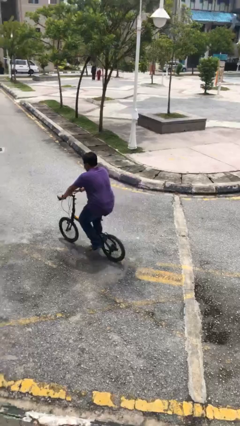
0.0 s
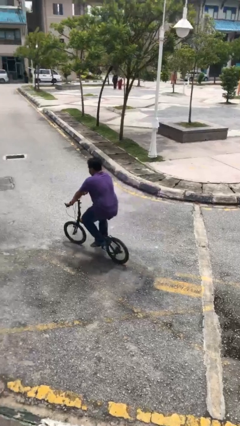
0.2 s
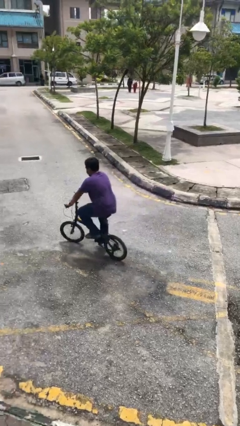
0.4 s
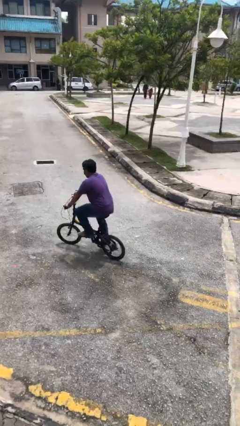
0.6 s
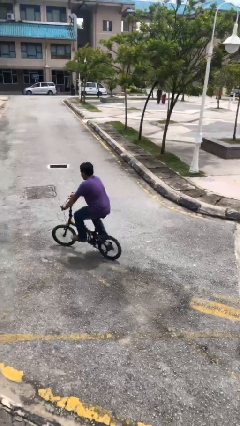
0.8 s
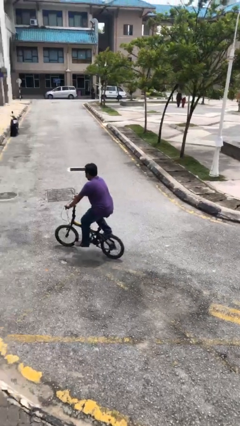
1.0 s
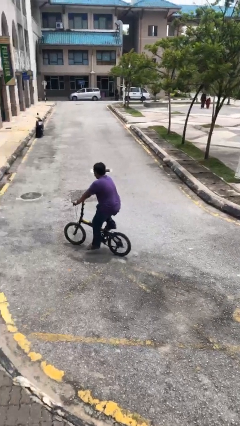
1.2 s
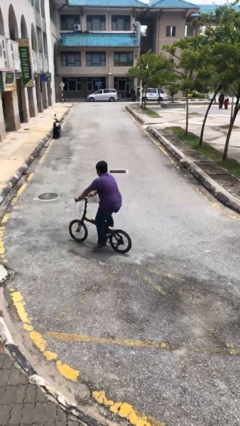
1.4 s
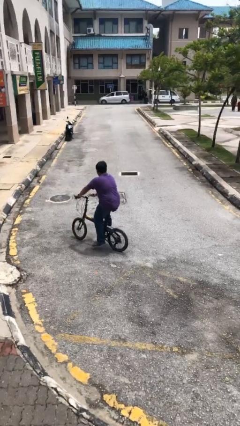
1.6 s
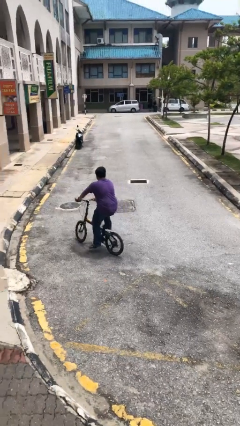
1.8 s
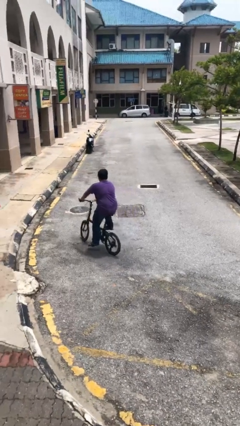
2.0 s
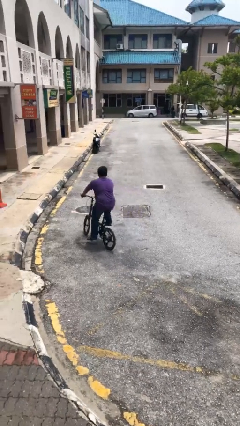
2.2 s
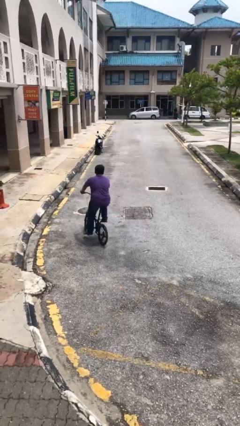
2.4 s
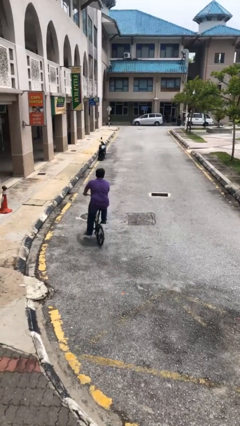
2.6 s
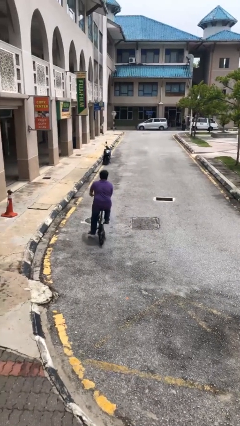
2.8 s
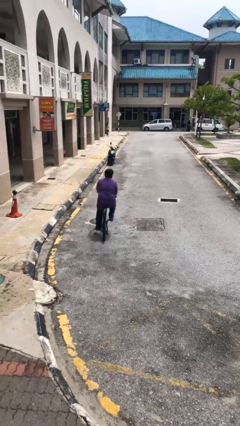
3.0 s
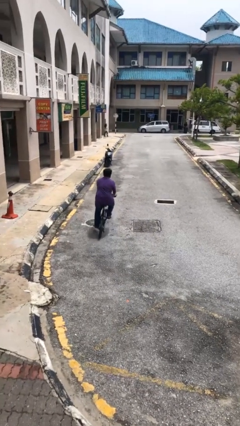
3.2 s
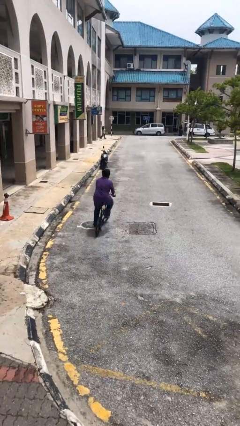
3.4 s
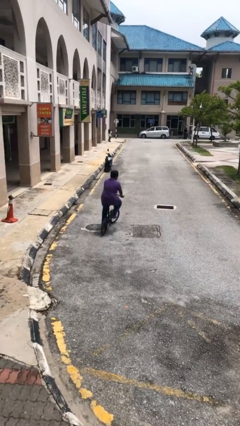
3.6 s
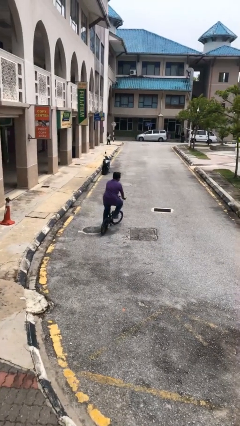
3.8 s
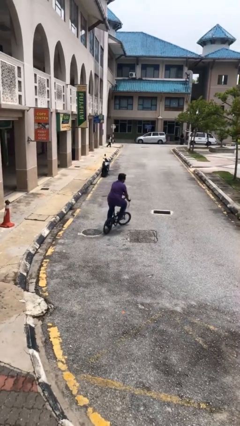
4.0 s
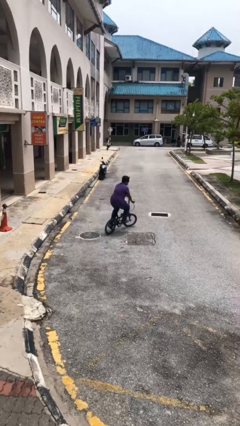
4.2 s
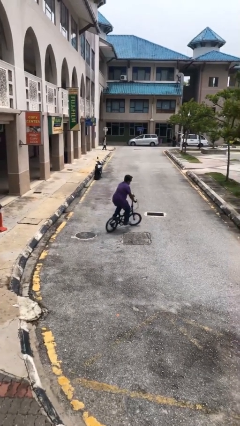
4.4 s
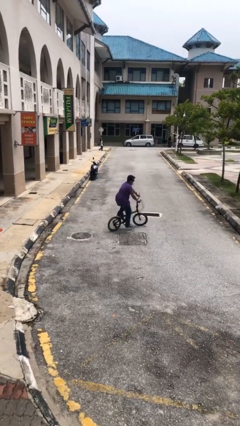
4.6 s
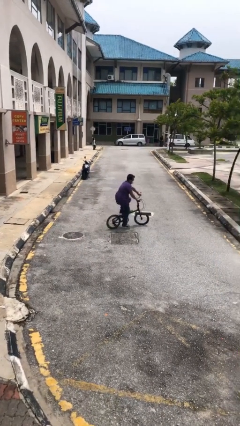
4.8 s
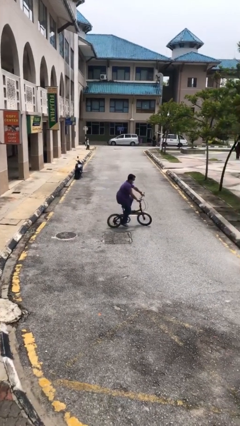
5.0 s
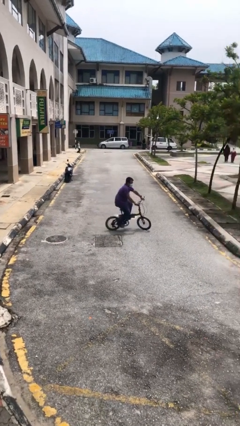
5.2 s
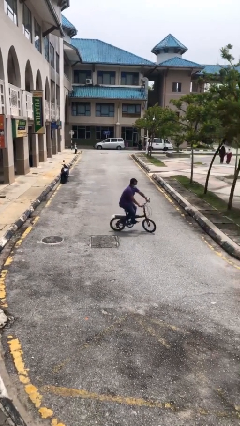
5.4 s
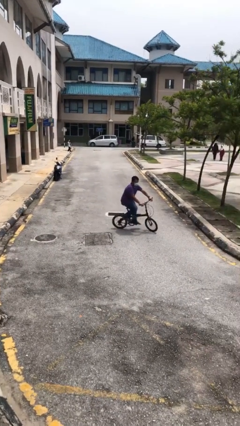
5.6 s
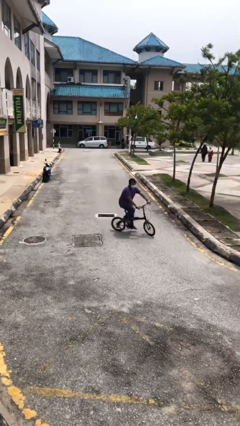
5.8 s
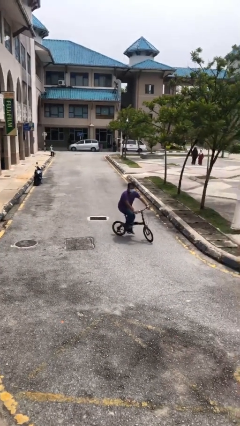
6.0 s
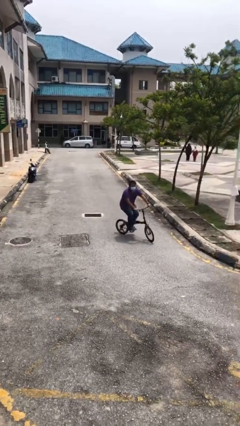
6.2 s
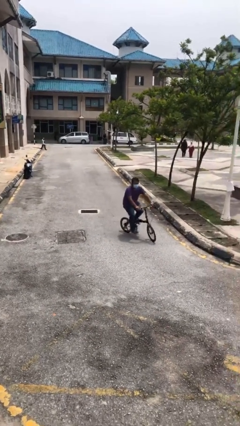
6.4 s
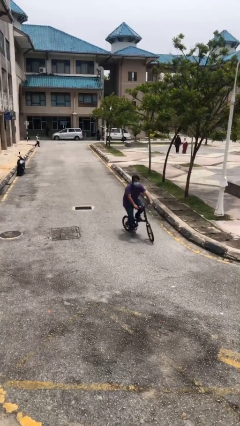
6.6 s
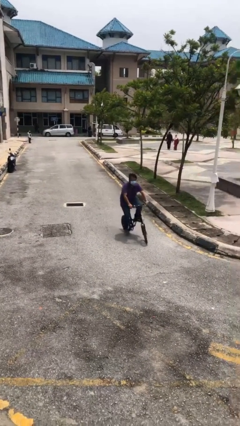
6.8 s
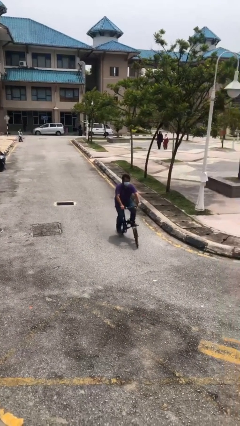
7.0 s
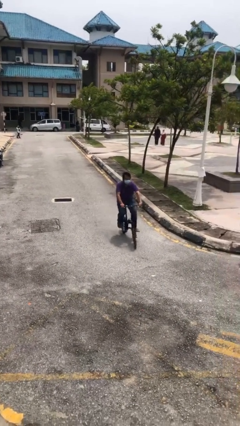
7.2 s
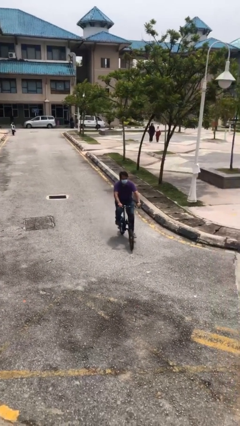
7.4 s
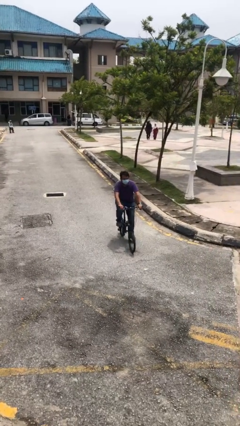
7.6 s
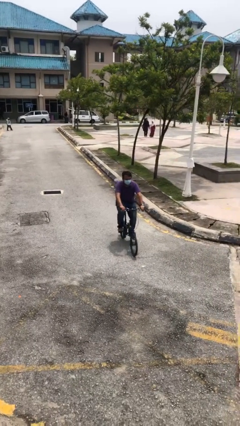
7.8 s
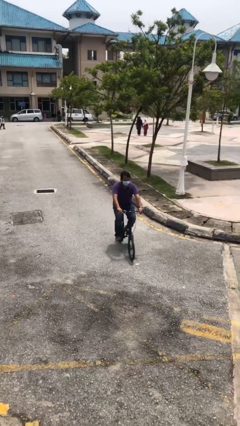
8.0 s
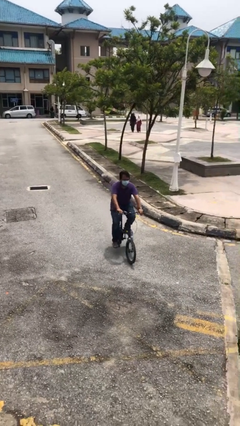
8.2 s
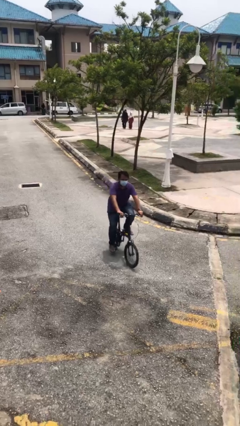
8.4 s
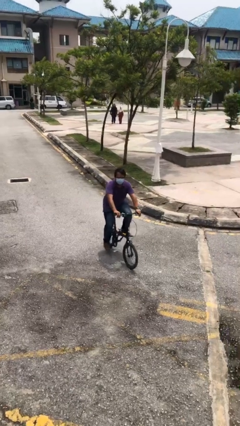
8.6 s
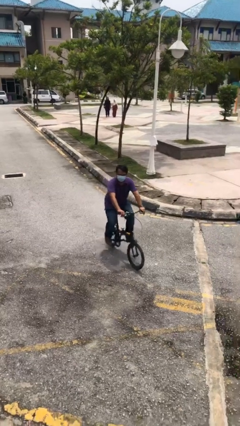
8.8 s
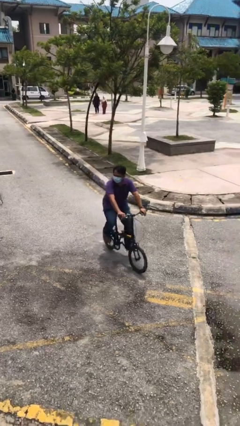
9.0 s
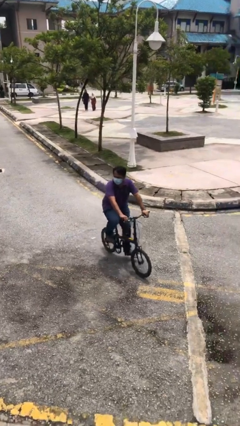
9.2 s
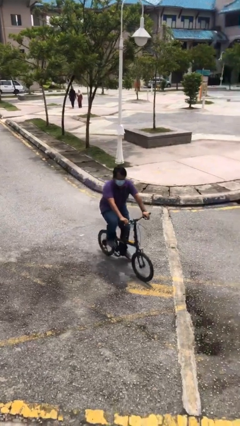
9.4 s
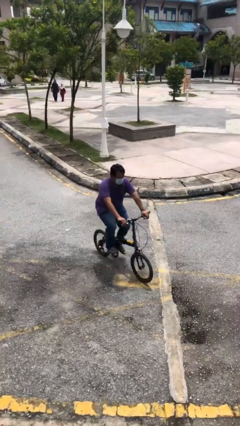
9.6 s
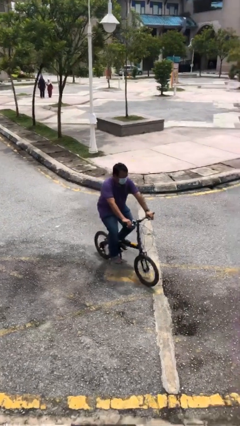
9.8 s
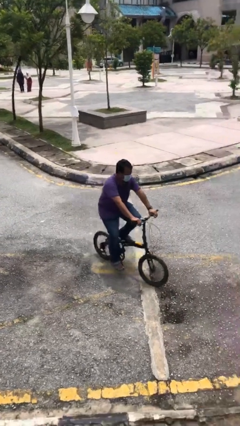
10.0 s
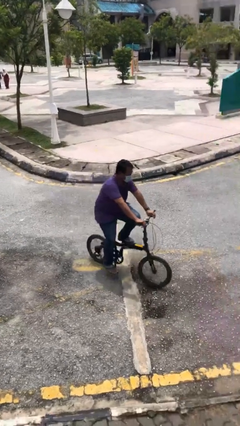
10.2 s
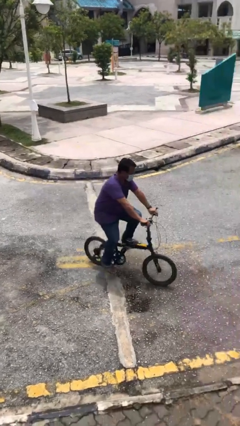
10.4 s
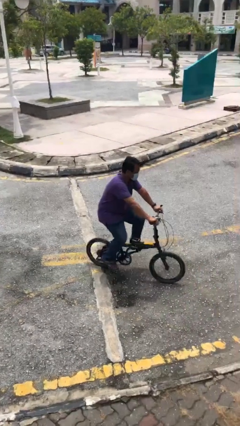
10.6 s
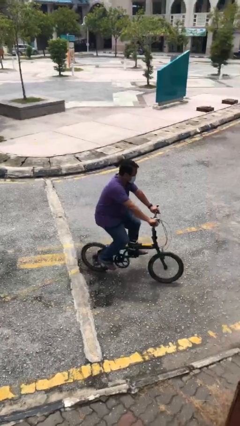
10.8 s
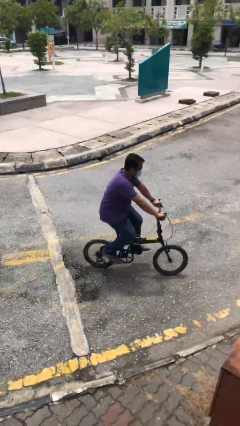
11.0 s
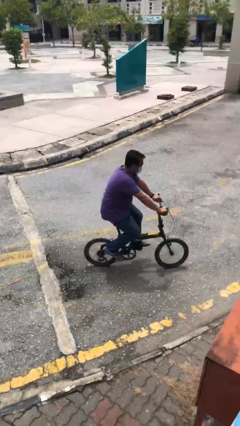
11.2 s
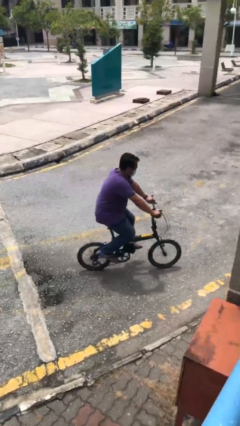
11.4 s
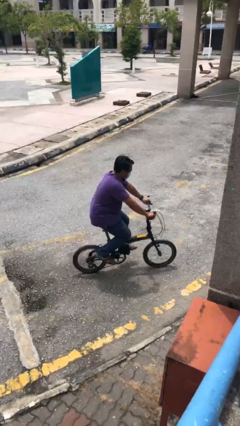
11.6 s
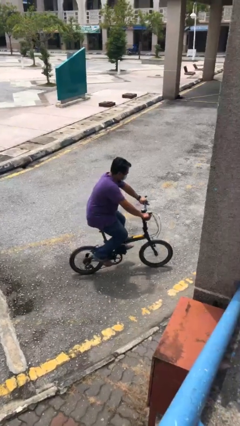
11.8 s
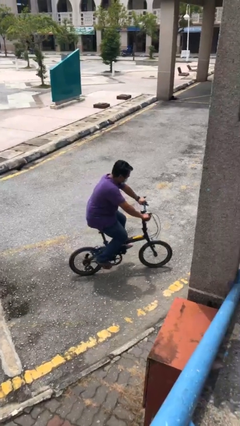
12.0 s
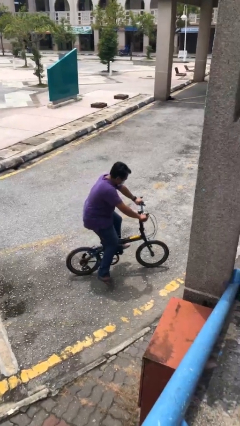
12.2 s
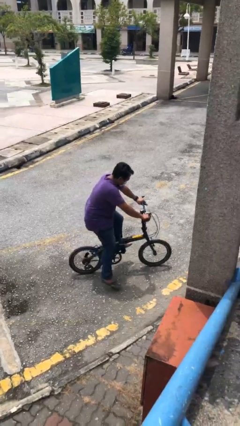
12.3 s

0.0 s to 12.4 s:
person rides bicycle

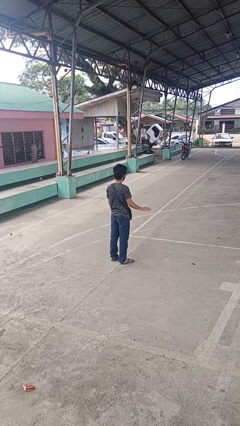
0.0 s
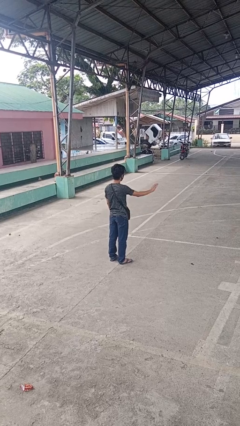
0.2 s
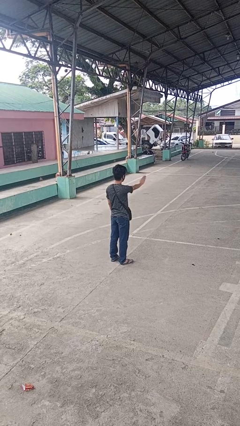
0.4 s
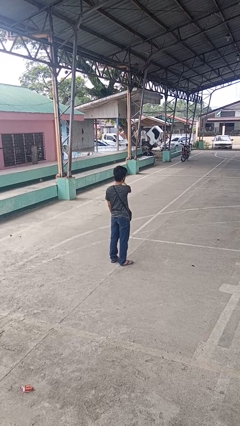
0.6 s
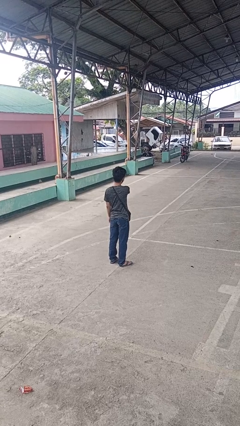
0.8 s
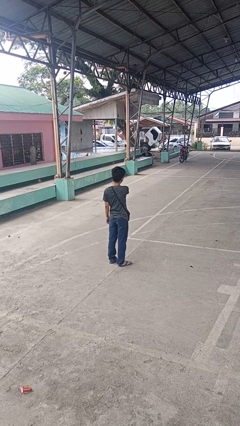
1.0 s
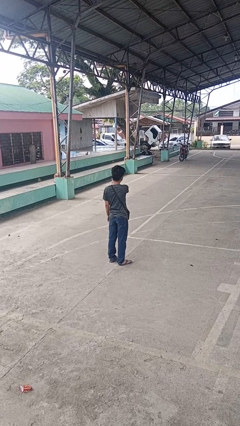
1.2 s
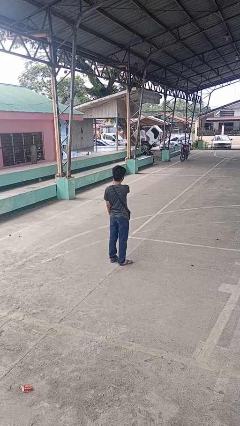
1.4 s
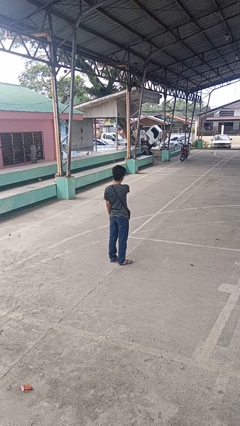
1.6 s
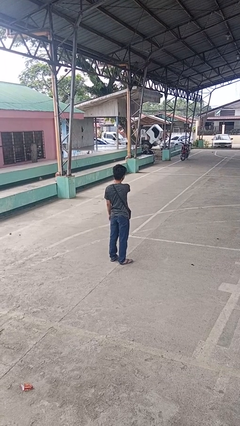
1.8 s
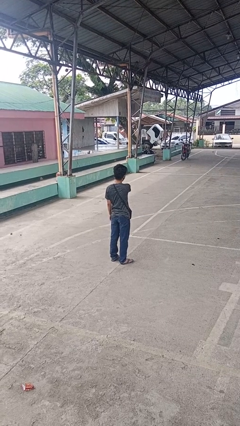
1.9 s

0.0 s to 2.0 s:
person gestures swipe left

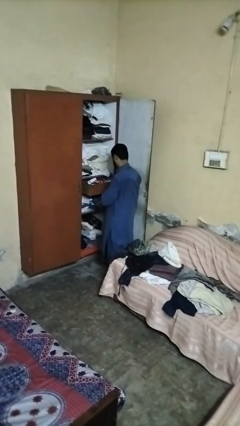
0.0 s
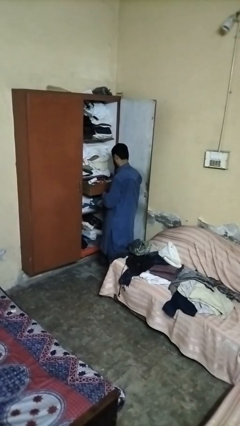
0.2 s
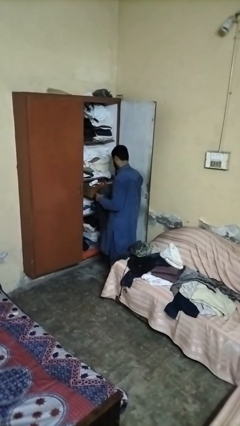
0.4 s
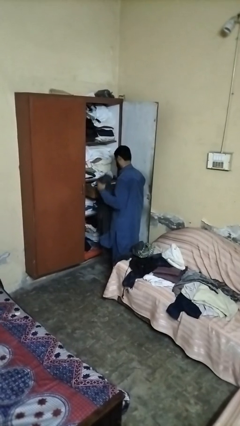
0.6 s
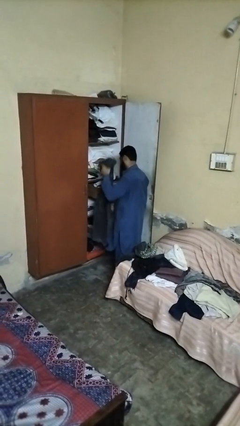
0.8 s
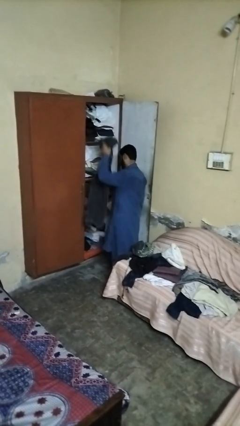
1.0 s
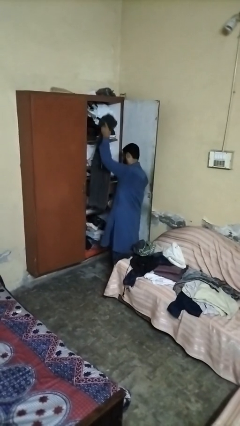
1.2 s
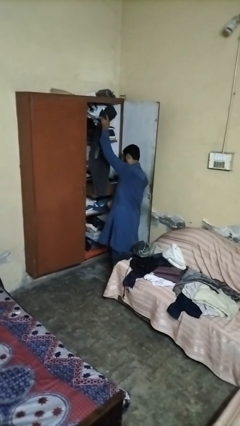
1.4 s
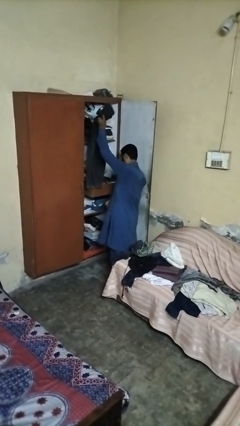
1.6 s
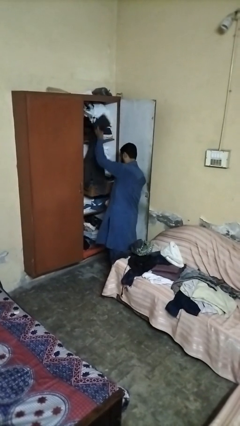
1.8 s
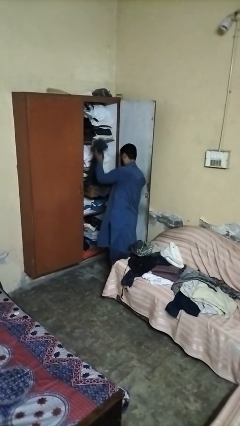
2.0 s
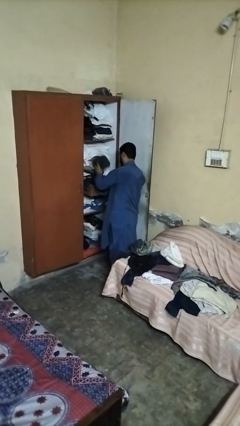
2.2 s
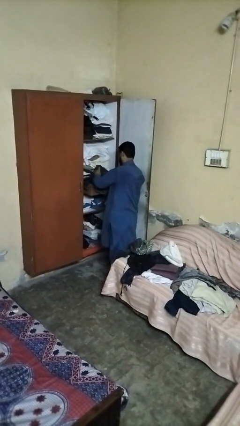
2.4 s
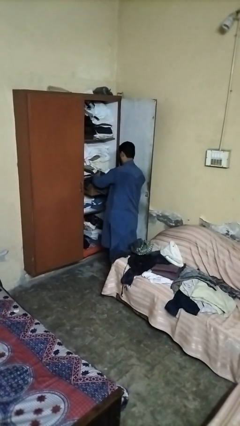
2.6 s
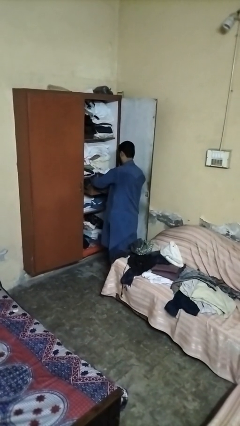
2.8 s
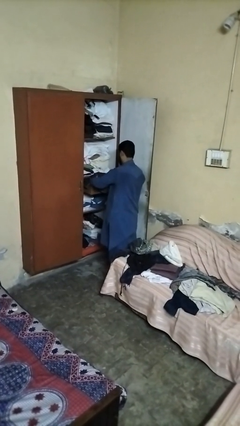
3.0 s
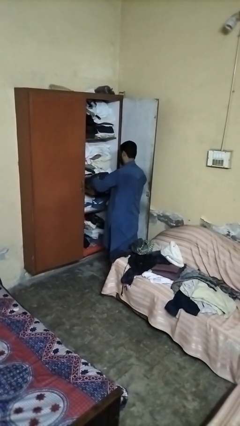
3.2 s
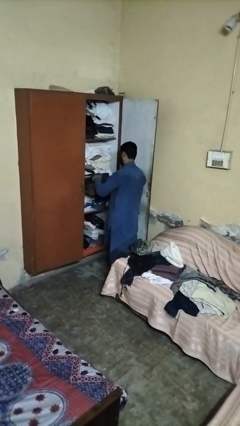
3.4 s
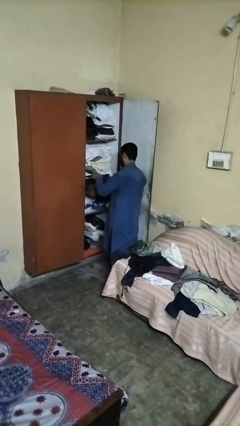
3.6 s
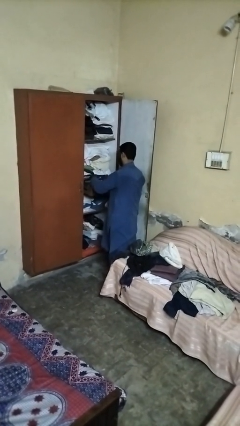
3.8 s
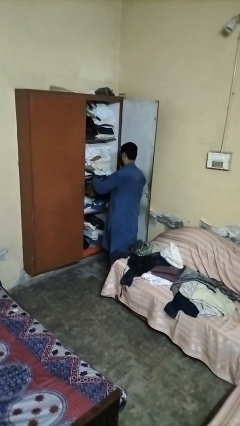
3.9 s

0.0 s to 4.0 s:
person puts clothes into dresser
